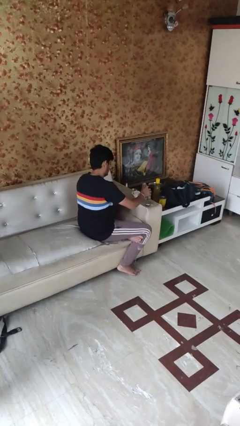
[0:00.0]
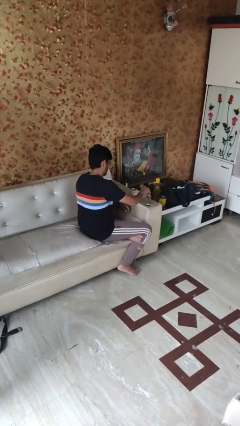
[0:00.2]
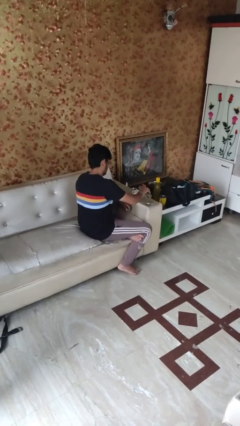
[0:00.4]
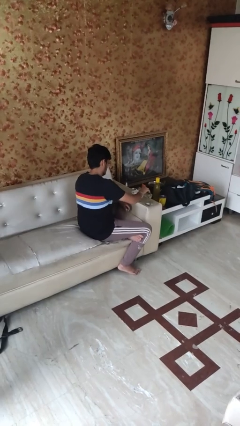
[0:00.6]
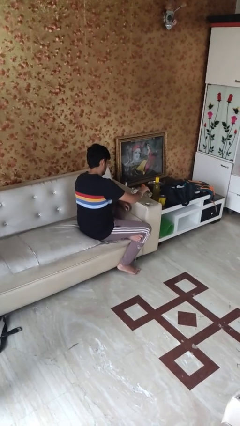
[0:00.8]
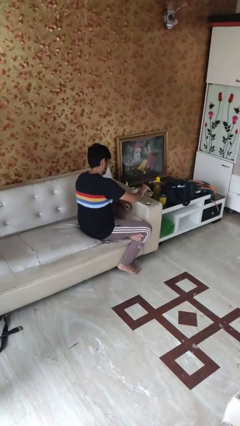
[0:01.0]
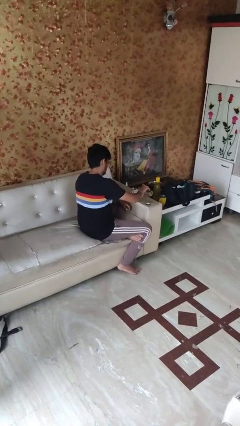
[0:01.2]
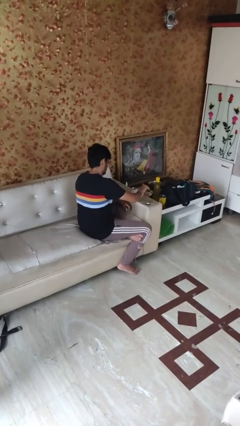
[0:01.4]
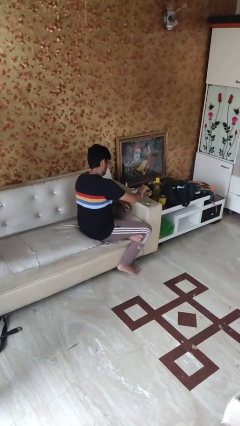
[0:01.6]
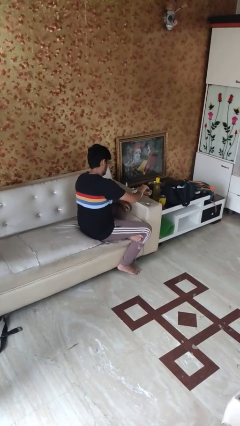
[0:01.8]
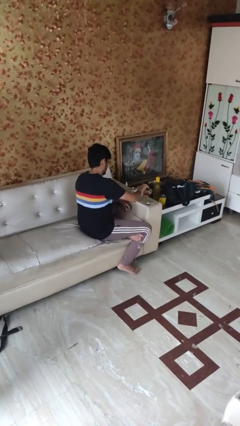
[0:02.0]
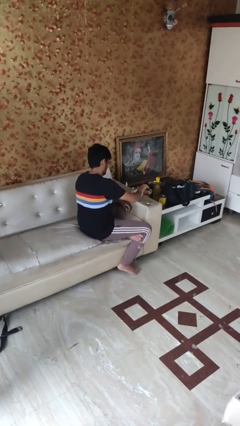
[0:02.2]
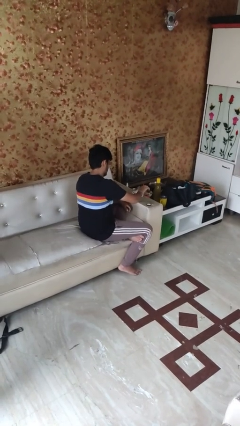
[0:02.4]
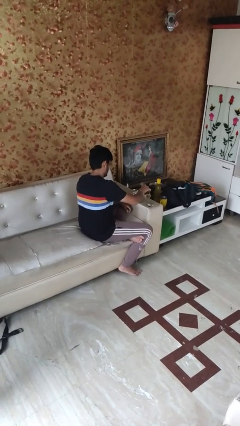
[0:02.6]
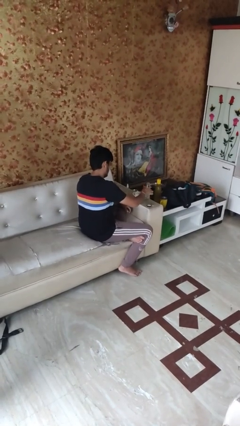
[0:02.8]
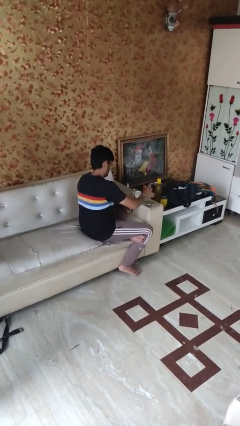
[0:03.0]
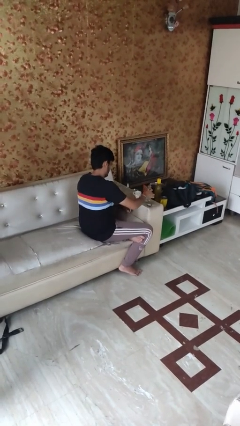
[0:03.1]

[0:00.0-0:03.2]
person pours liquid into cup

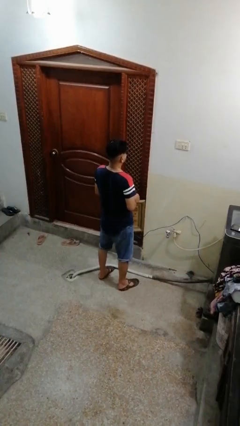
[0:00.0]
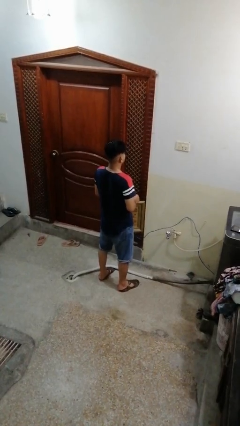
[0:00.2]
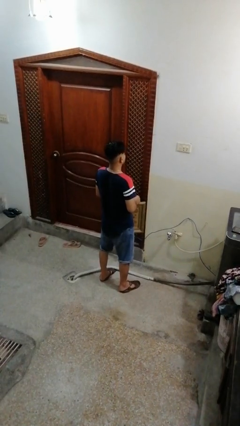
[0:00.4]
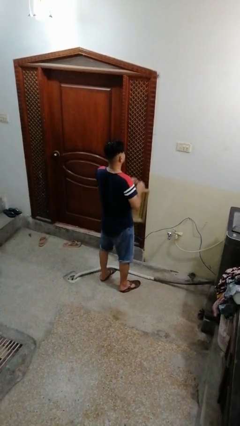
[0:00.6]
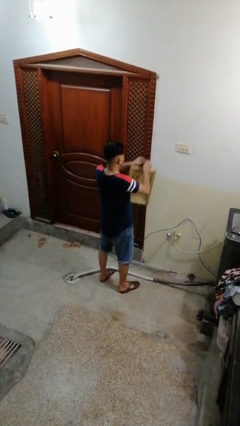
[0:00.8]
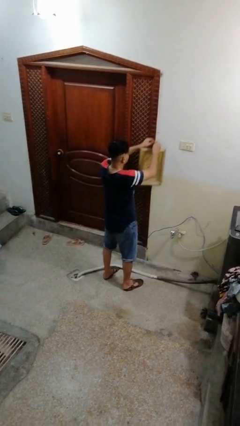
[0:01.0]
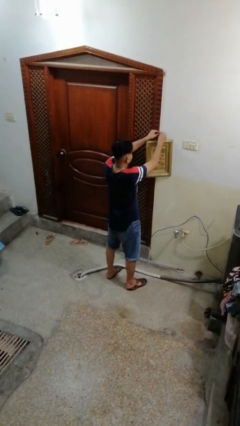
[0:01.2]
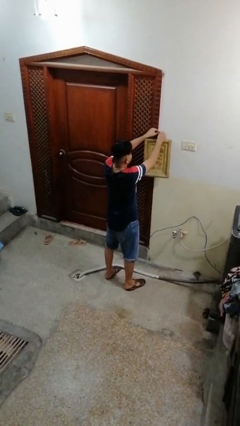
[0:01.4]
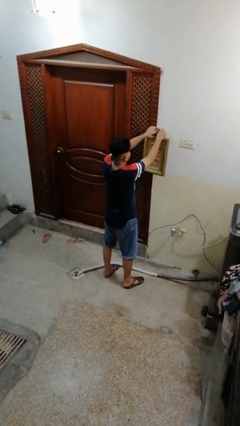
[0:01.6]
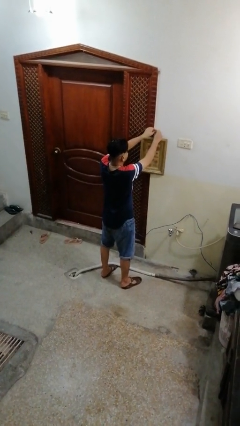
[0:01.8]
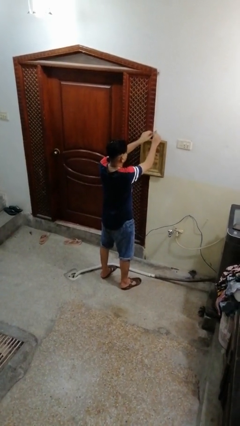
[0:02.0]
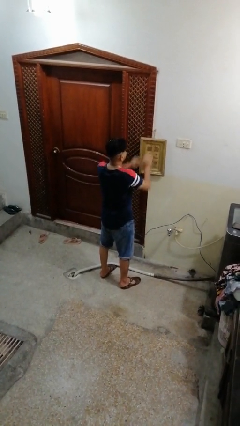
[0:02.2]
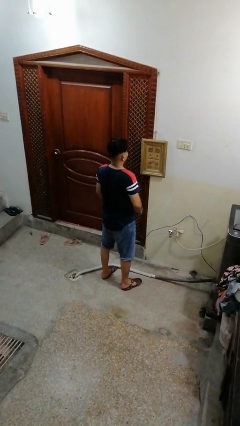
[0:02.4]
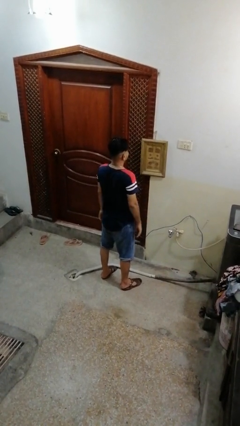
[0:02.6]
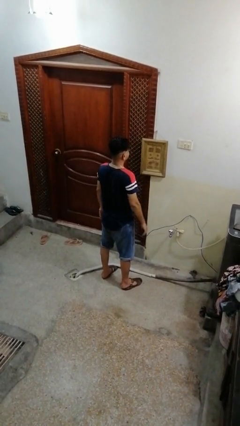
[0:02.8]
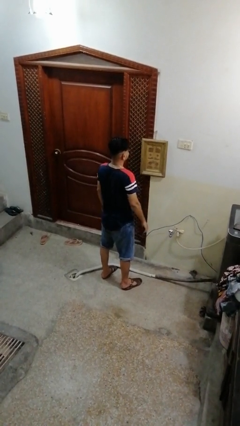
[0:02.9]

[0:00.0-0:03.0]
person puts up picture frame

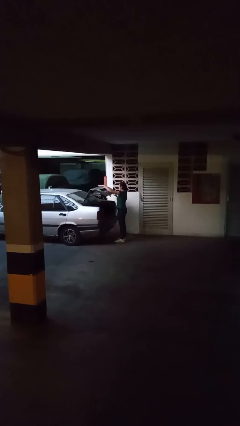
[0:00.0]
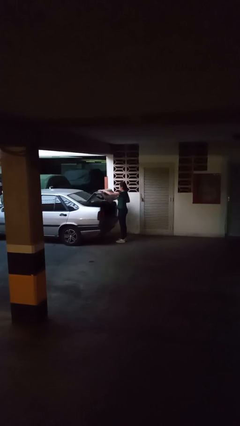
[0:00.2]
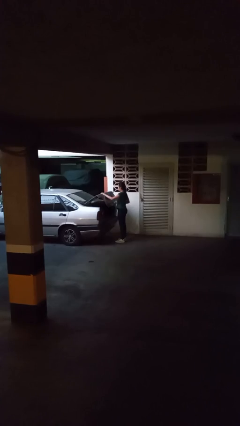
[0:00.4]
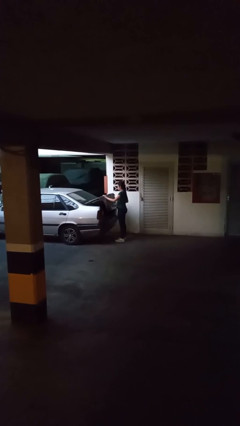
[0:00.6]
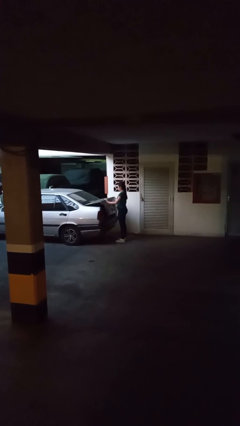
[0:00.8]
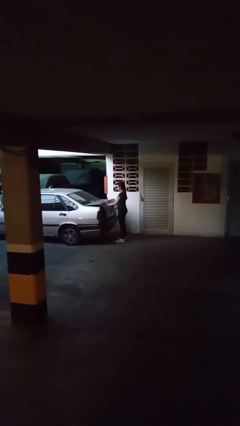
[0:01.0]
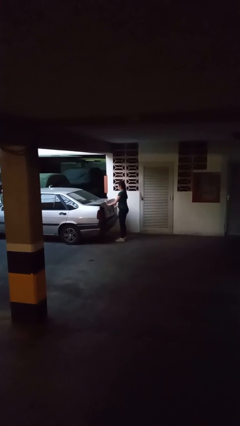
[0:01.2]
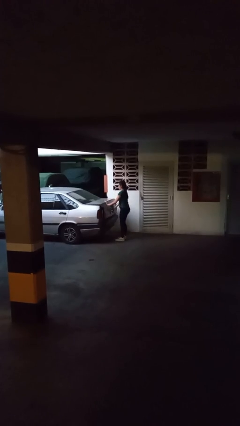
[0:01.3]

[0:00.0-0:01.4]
person closes car trunk

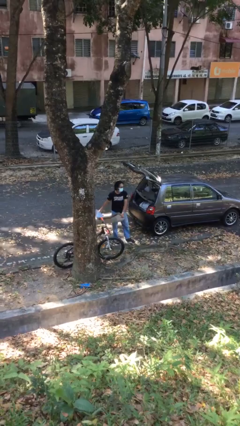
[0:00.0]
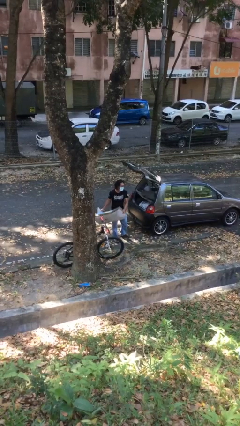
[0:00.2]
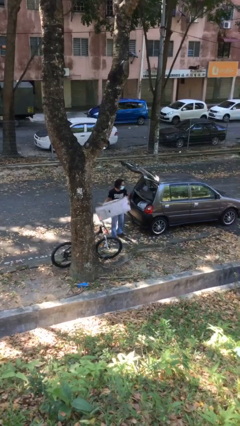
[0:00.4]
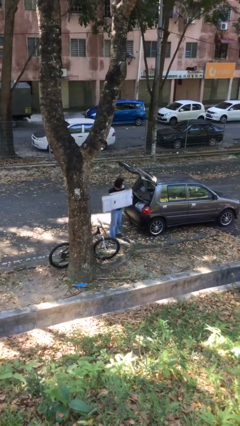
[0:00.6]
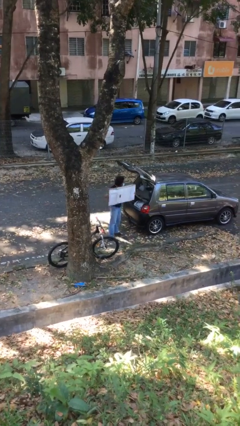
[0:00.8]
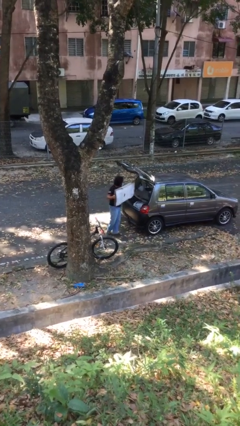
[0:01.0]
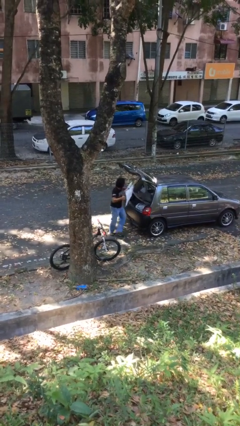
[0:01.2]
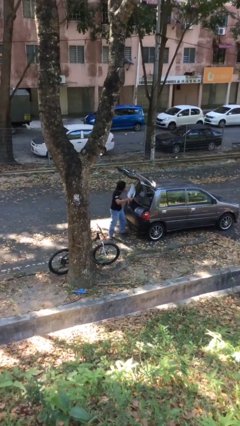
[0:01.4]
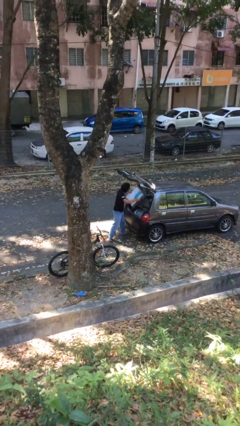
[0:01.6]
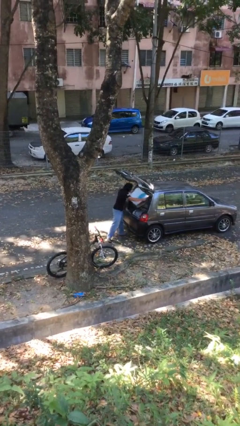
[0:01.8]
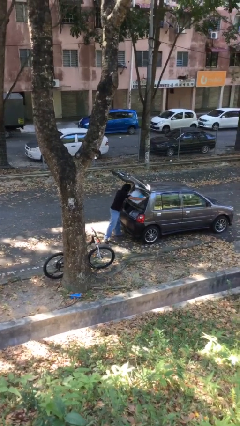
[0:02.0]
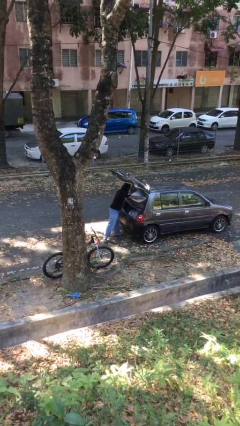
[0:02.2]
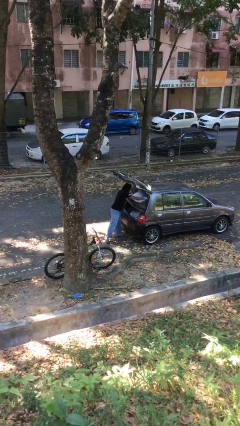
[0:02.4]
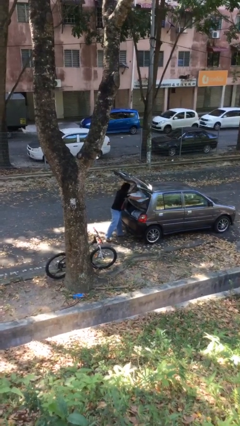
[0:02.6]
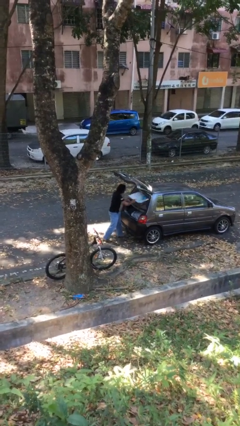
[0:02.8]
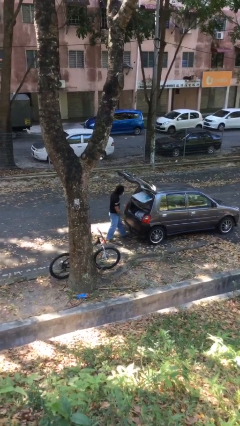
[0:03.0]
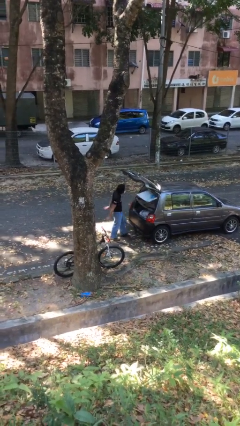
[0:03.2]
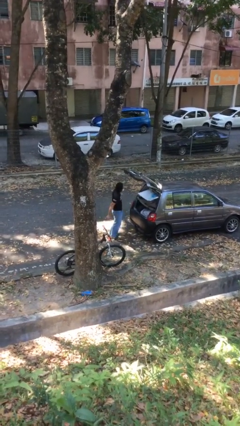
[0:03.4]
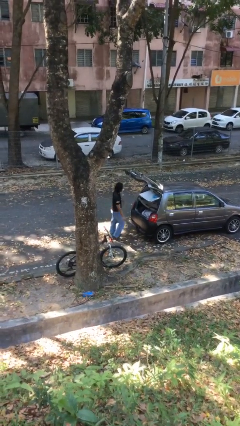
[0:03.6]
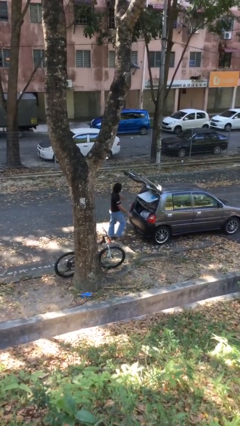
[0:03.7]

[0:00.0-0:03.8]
person loads car

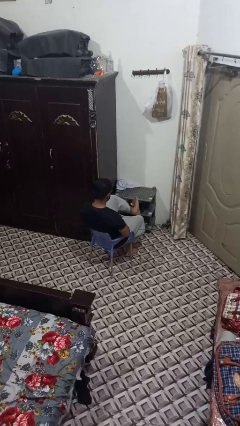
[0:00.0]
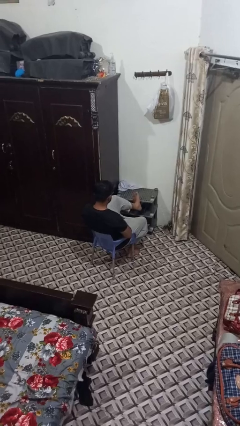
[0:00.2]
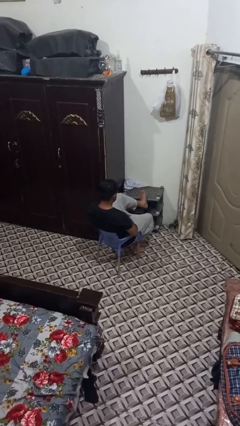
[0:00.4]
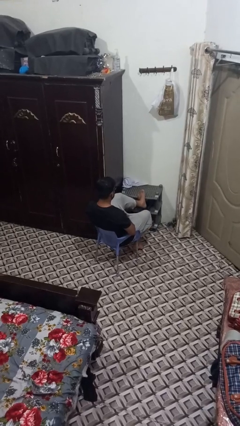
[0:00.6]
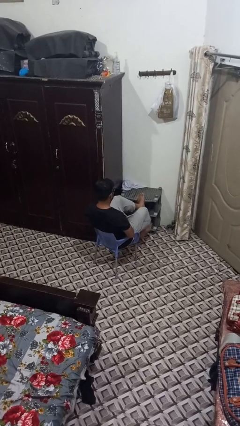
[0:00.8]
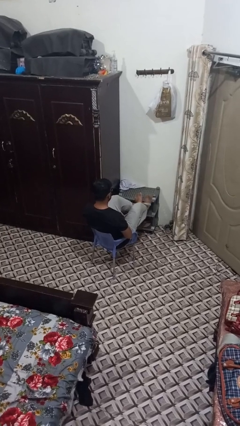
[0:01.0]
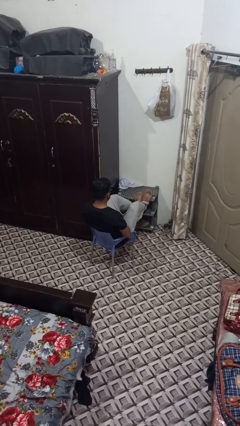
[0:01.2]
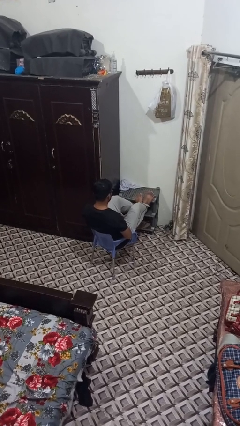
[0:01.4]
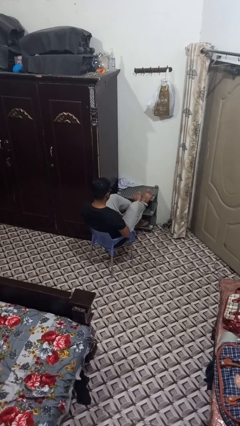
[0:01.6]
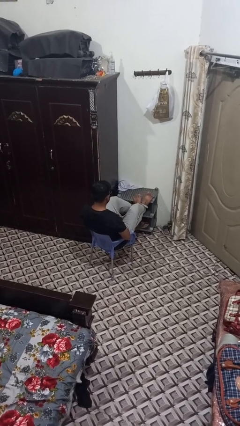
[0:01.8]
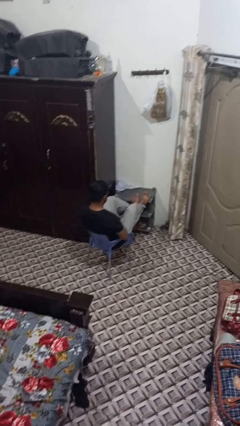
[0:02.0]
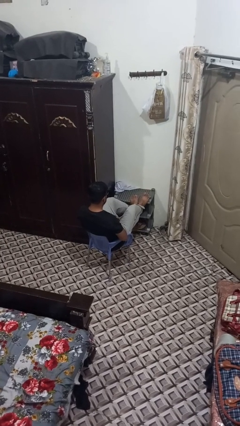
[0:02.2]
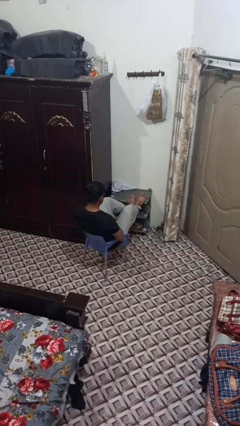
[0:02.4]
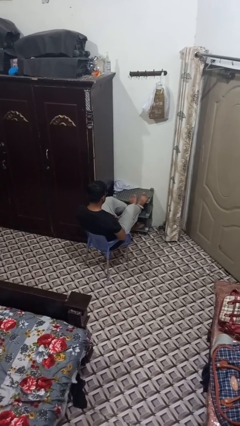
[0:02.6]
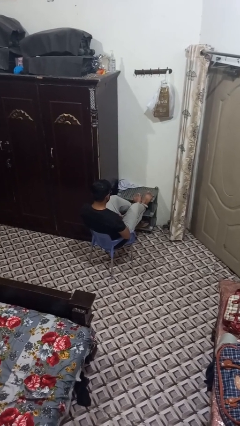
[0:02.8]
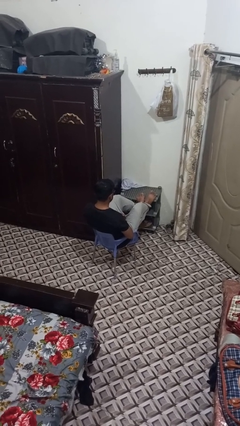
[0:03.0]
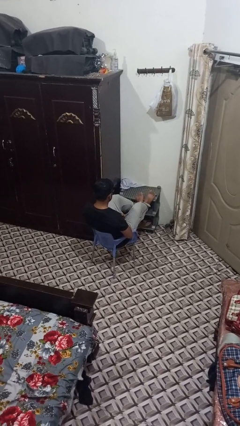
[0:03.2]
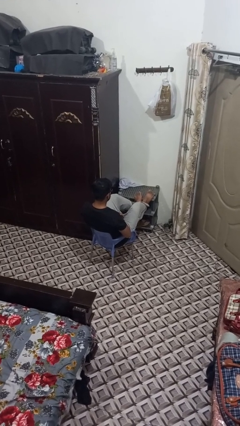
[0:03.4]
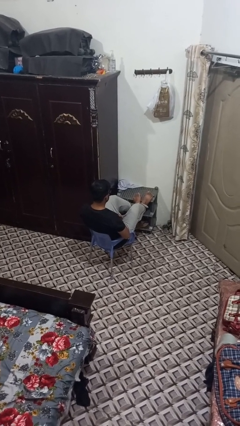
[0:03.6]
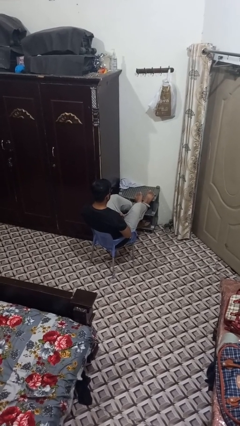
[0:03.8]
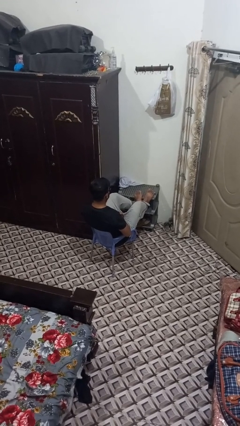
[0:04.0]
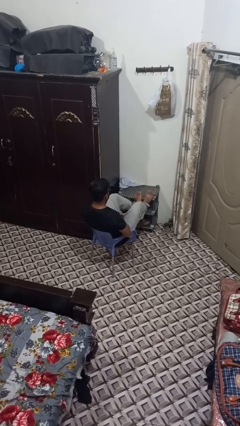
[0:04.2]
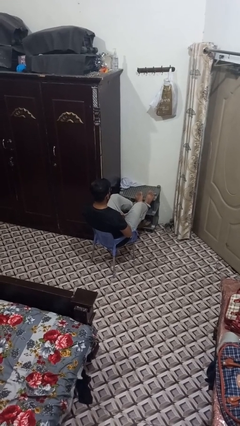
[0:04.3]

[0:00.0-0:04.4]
person puts feet up

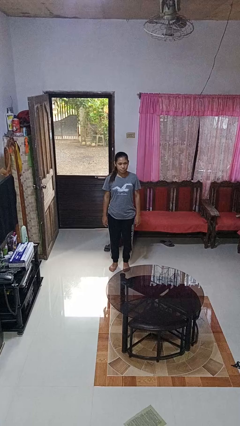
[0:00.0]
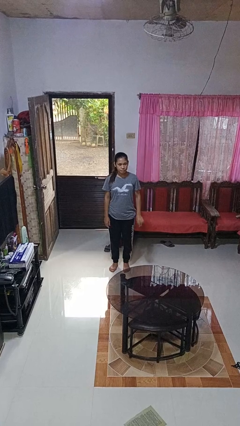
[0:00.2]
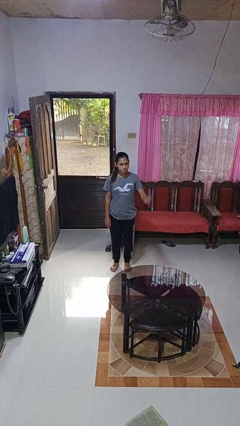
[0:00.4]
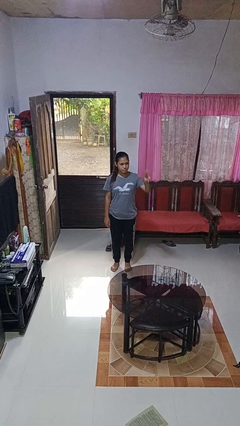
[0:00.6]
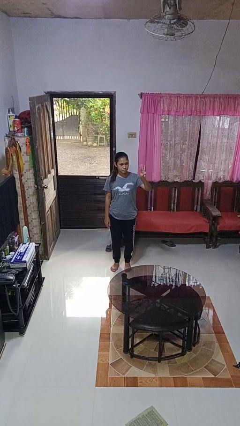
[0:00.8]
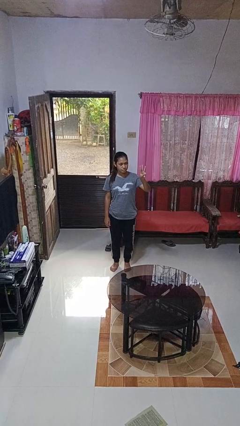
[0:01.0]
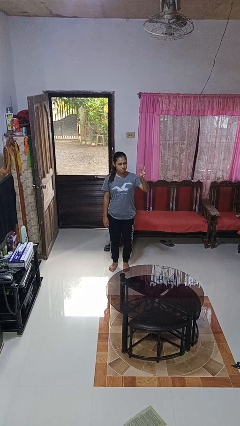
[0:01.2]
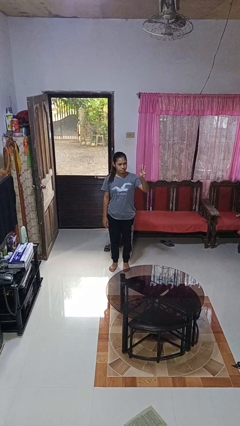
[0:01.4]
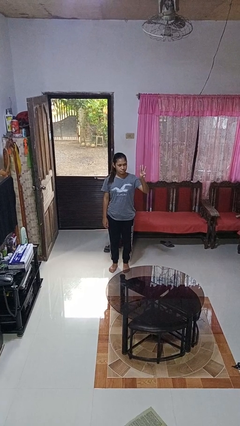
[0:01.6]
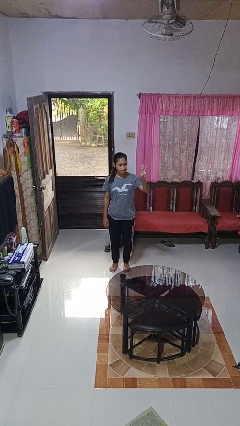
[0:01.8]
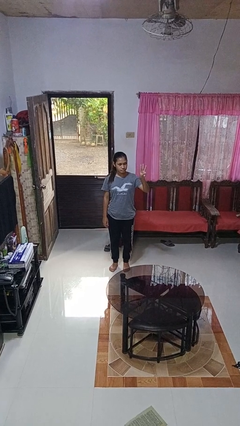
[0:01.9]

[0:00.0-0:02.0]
person gestures number three
